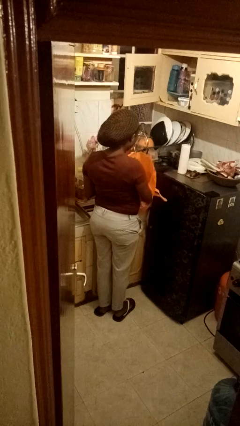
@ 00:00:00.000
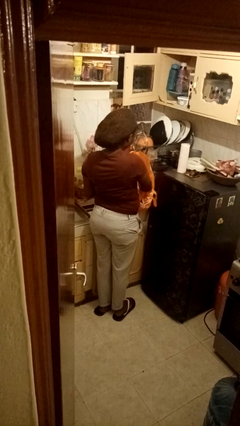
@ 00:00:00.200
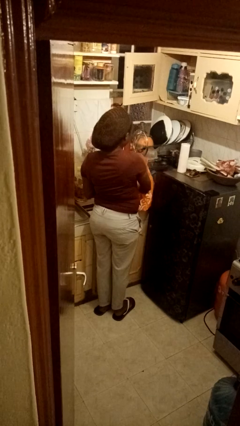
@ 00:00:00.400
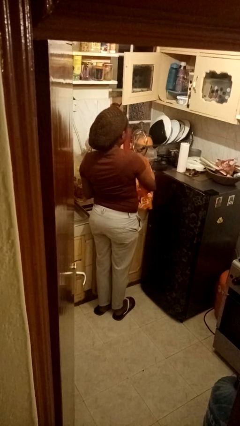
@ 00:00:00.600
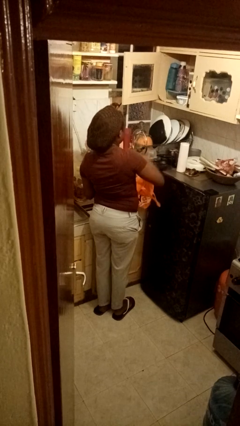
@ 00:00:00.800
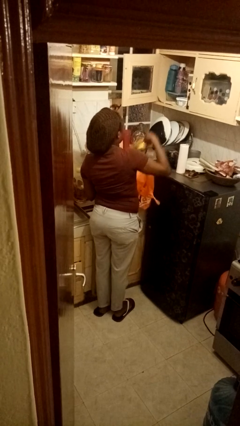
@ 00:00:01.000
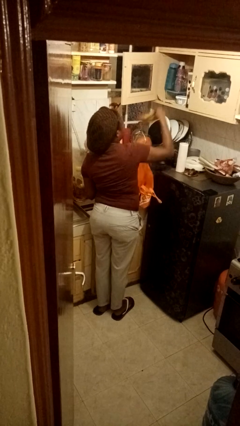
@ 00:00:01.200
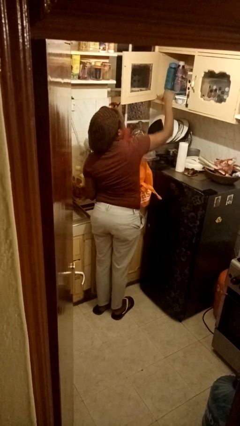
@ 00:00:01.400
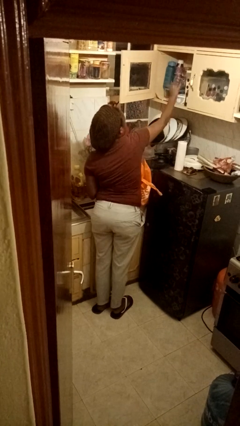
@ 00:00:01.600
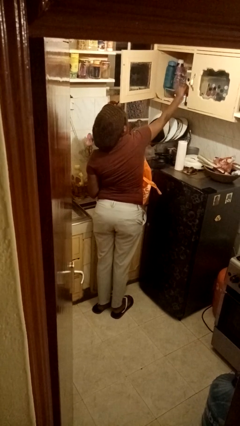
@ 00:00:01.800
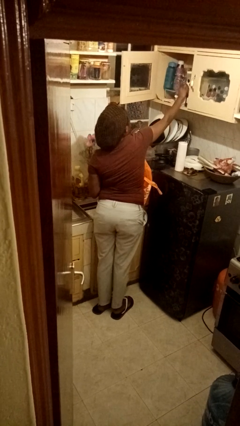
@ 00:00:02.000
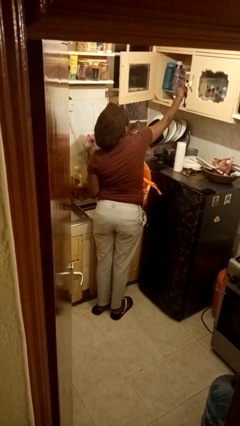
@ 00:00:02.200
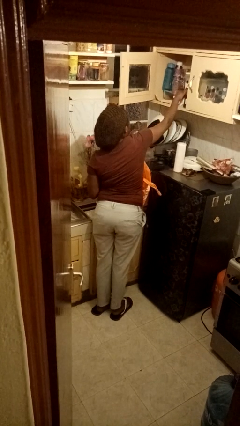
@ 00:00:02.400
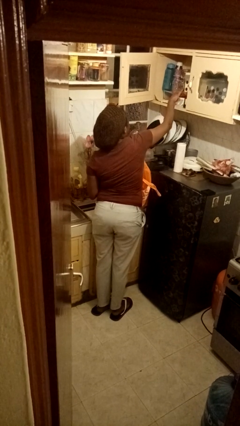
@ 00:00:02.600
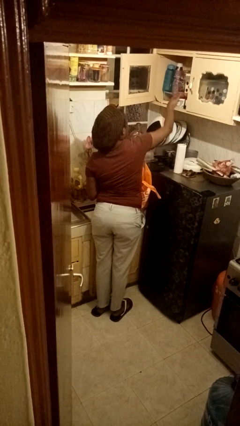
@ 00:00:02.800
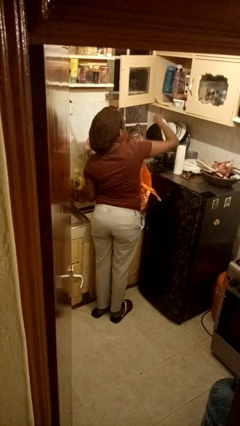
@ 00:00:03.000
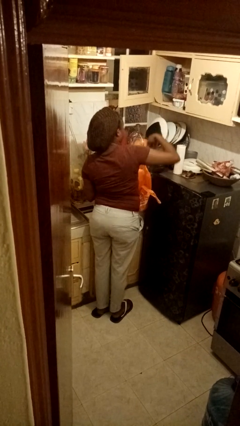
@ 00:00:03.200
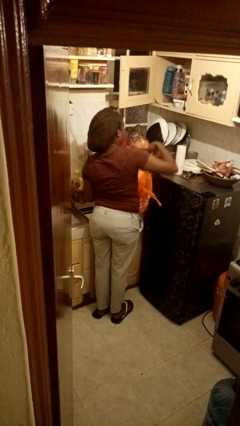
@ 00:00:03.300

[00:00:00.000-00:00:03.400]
person loads groceries into cabinet

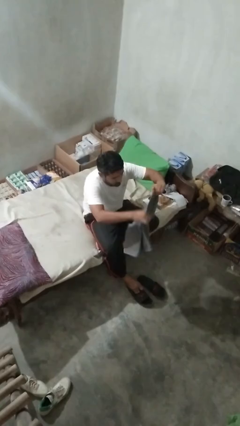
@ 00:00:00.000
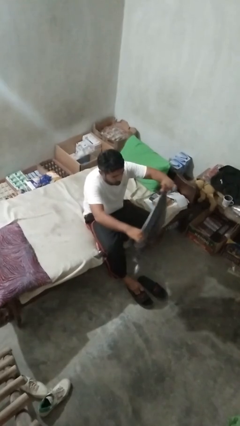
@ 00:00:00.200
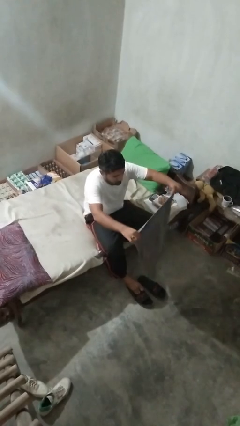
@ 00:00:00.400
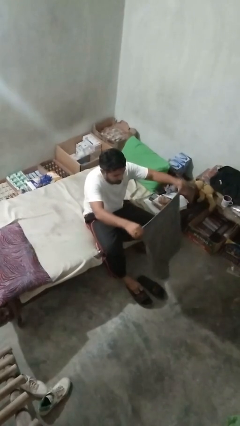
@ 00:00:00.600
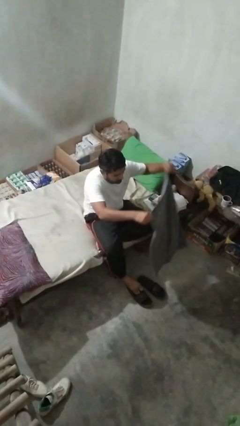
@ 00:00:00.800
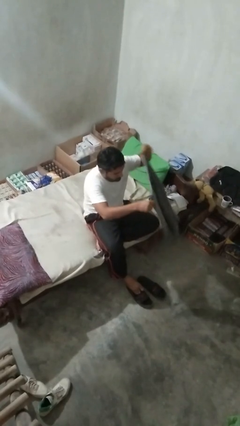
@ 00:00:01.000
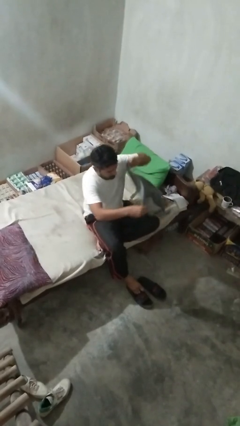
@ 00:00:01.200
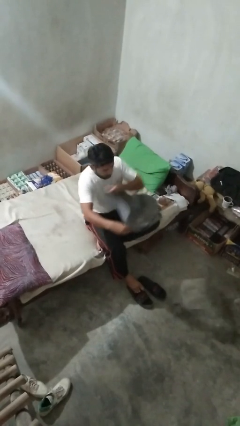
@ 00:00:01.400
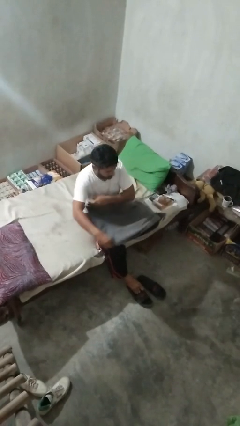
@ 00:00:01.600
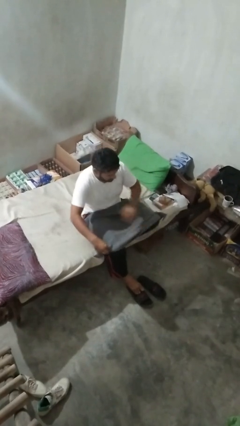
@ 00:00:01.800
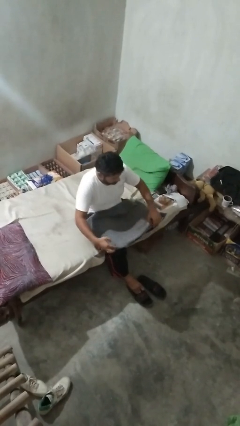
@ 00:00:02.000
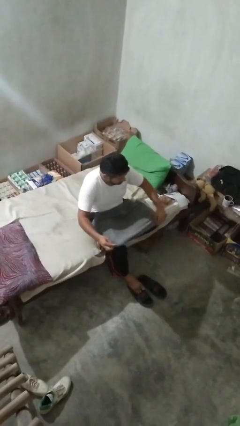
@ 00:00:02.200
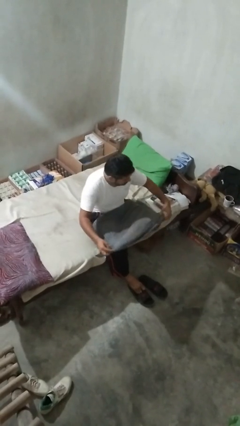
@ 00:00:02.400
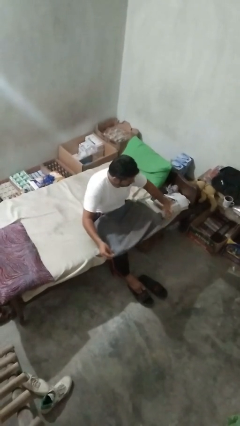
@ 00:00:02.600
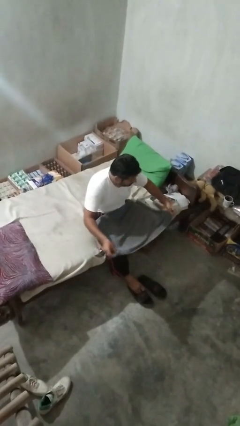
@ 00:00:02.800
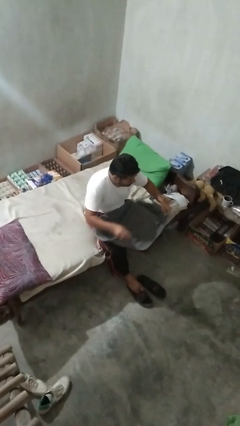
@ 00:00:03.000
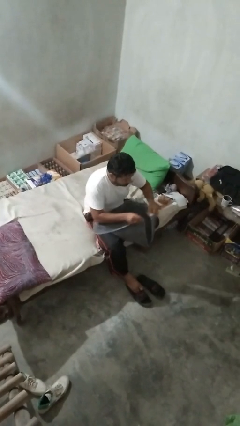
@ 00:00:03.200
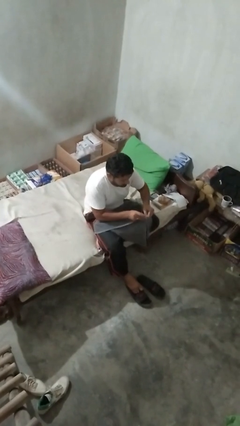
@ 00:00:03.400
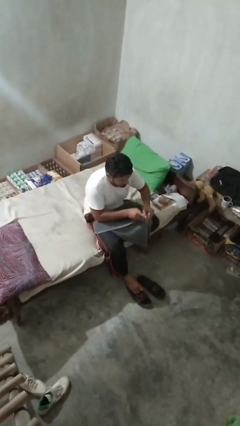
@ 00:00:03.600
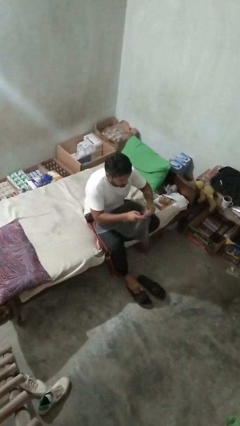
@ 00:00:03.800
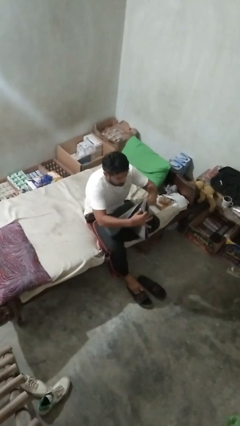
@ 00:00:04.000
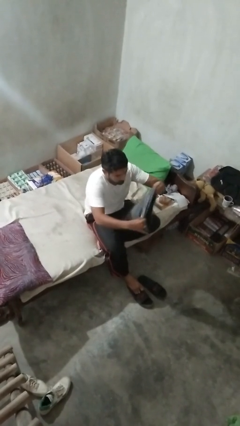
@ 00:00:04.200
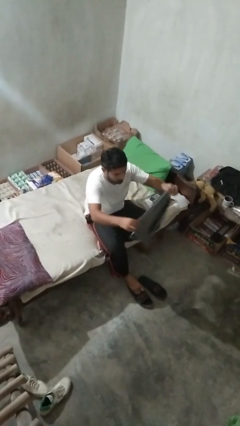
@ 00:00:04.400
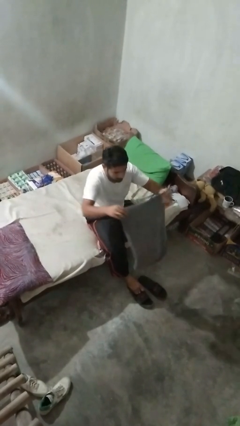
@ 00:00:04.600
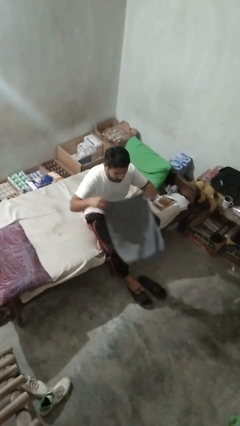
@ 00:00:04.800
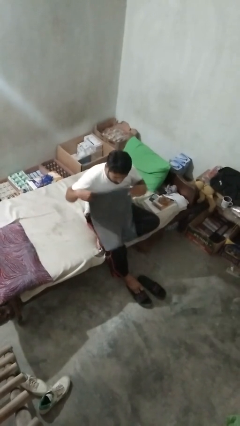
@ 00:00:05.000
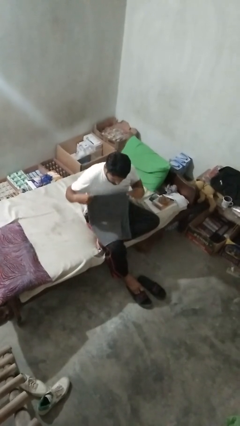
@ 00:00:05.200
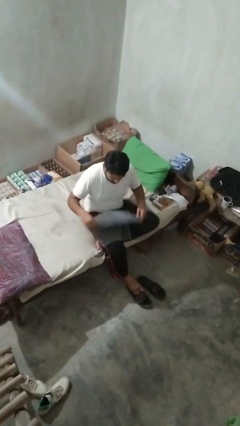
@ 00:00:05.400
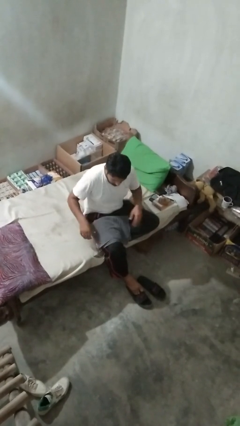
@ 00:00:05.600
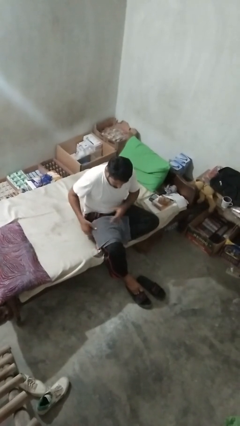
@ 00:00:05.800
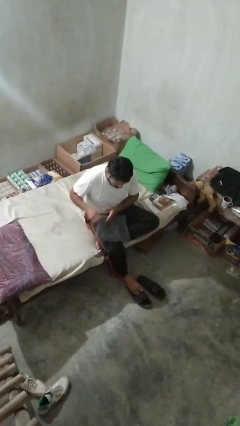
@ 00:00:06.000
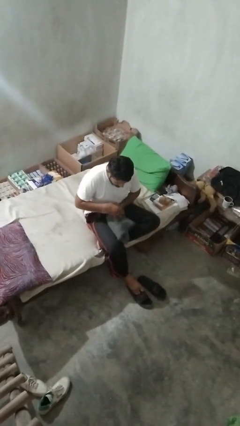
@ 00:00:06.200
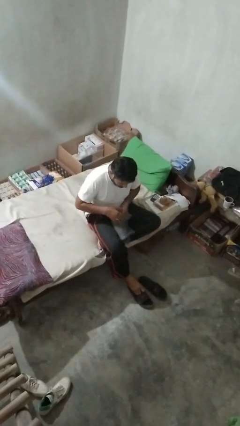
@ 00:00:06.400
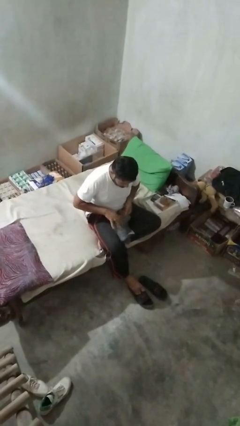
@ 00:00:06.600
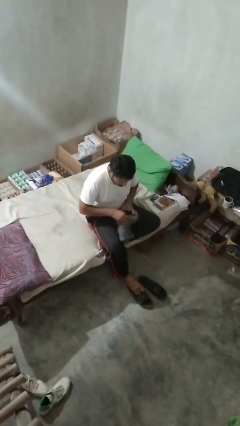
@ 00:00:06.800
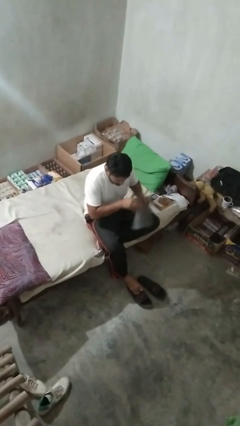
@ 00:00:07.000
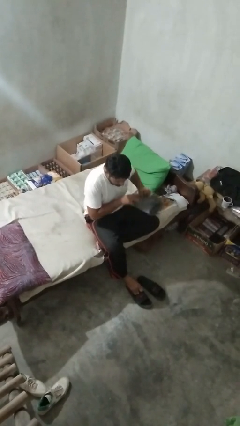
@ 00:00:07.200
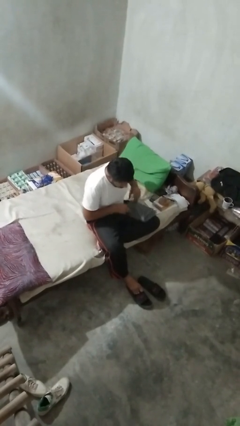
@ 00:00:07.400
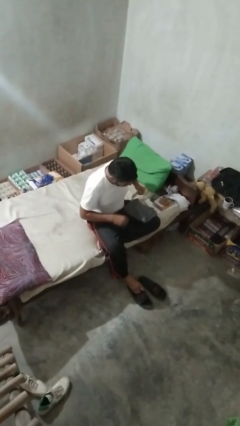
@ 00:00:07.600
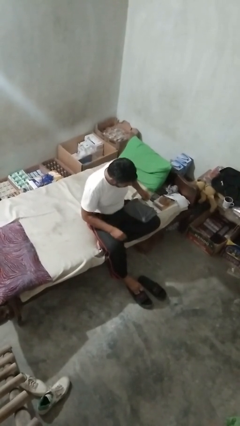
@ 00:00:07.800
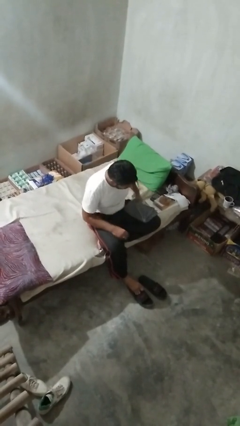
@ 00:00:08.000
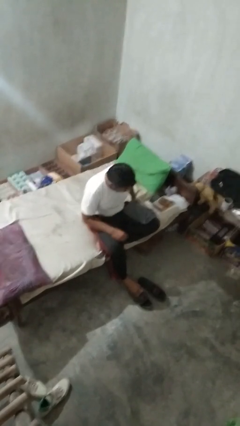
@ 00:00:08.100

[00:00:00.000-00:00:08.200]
person folds towel

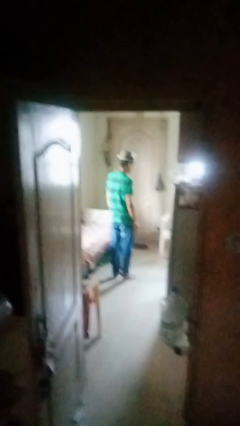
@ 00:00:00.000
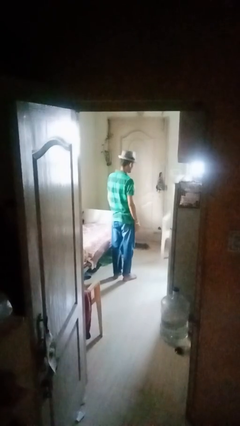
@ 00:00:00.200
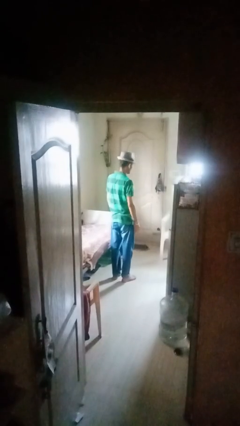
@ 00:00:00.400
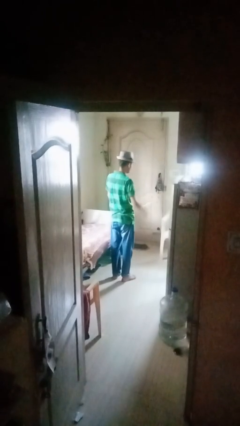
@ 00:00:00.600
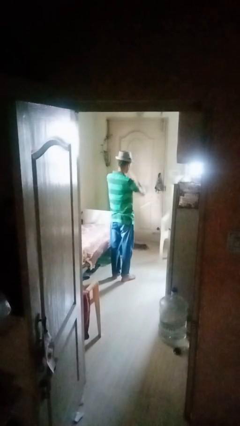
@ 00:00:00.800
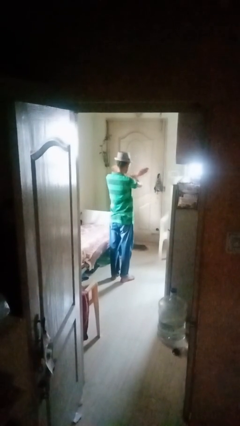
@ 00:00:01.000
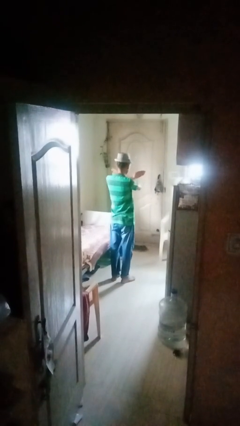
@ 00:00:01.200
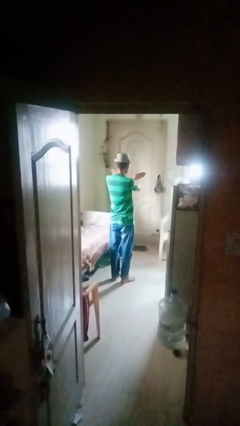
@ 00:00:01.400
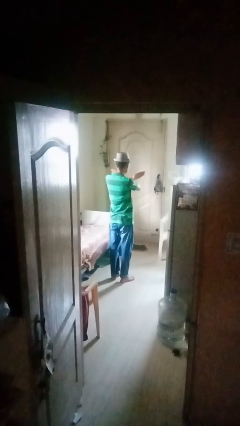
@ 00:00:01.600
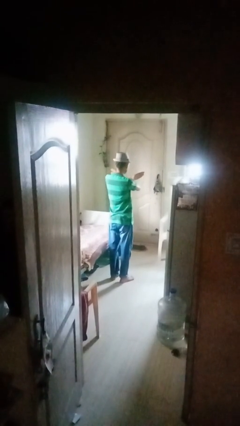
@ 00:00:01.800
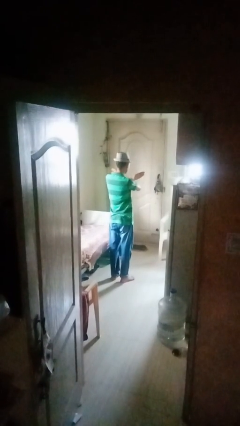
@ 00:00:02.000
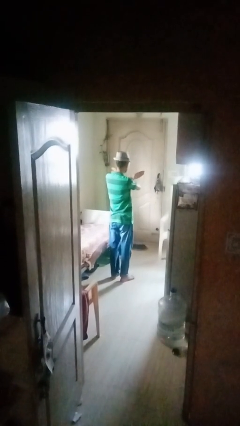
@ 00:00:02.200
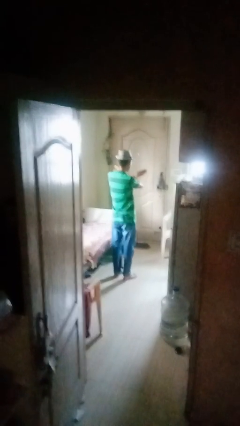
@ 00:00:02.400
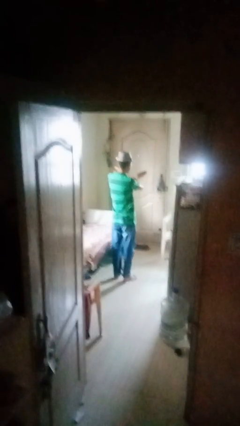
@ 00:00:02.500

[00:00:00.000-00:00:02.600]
person gestures arms x

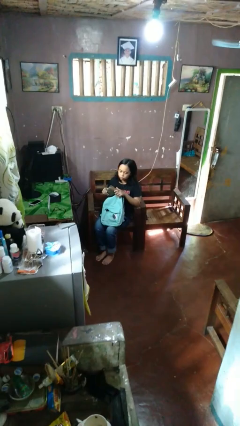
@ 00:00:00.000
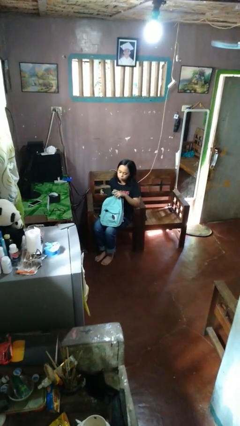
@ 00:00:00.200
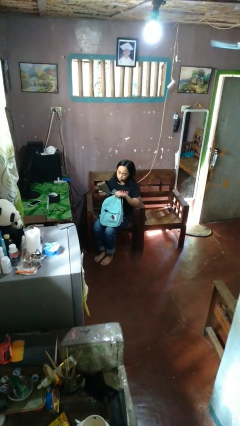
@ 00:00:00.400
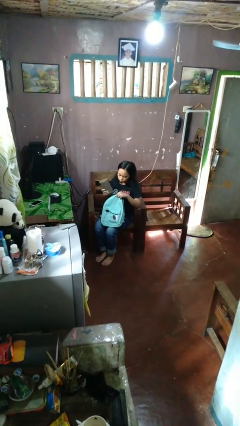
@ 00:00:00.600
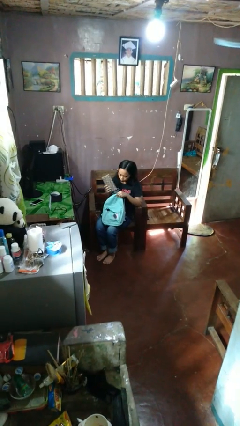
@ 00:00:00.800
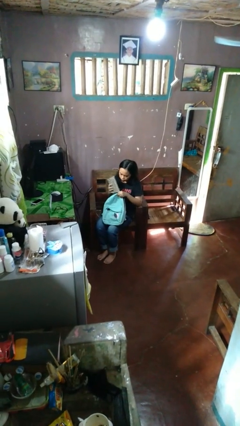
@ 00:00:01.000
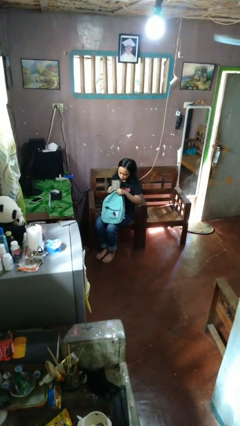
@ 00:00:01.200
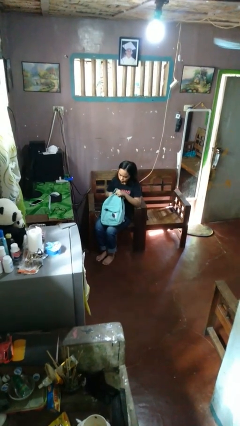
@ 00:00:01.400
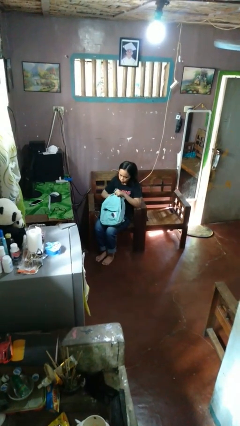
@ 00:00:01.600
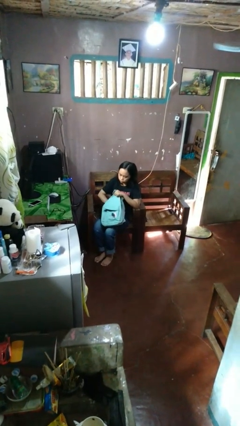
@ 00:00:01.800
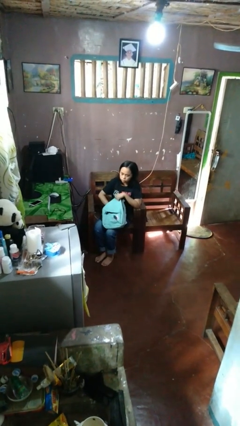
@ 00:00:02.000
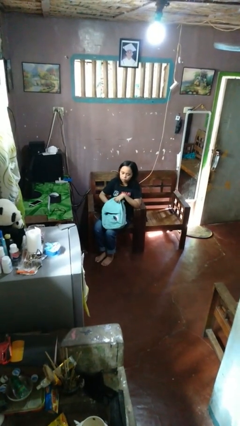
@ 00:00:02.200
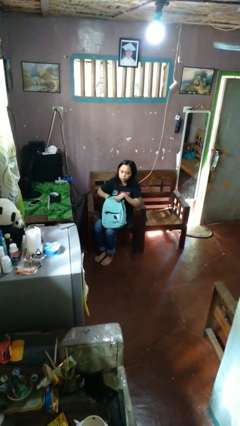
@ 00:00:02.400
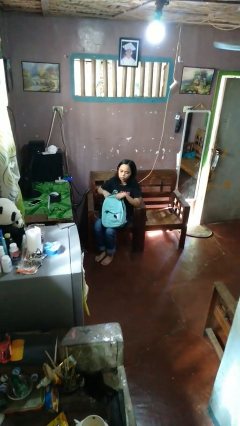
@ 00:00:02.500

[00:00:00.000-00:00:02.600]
person puts object into backpack

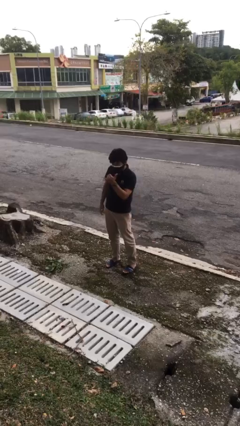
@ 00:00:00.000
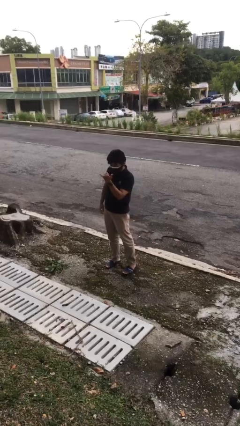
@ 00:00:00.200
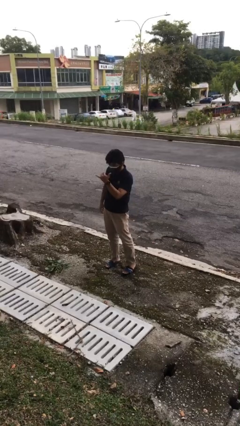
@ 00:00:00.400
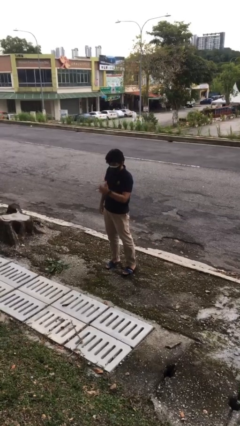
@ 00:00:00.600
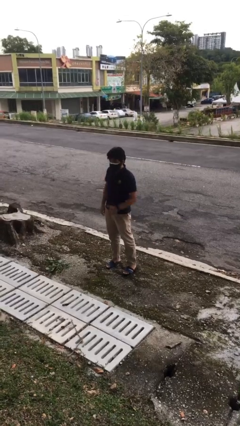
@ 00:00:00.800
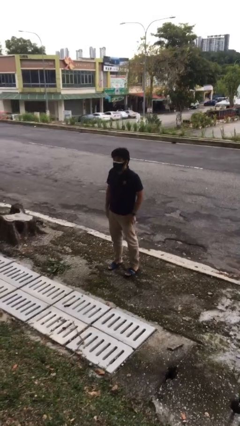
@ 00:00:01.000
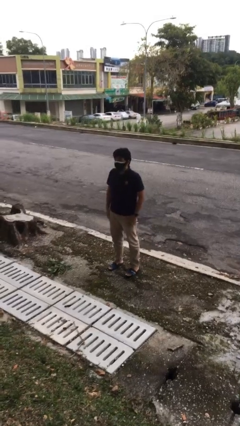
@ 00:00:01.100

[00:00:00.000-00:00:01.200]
person gestures hang loose
